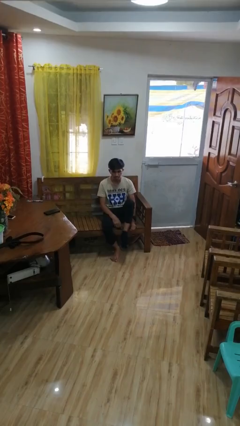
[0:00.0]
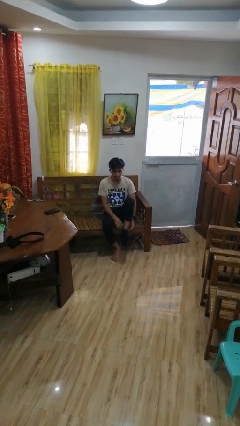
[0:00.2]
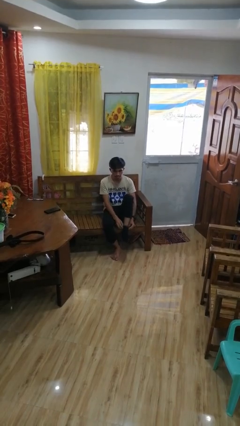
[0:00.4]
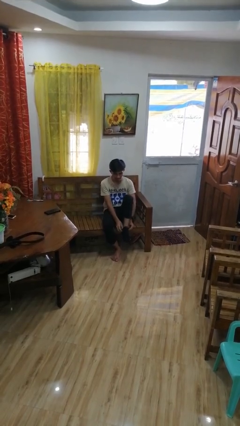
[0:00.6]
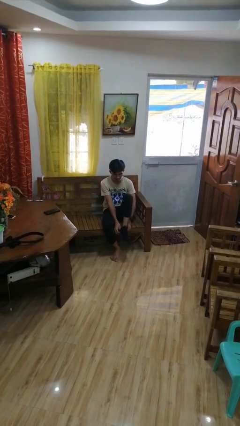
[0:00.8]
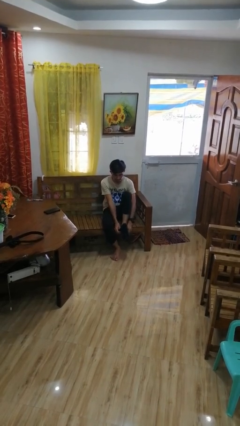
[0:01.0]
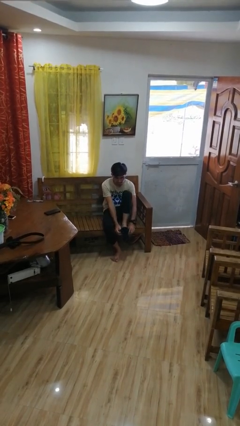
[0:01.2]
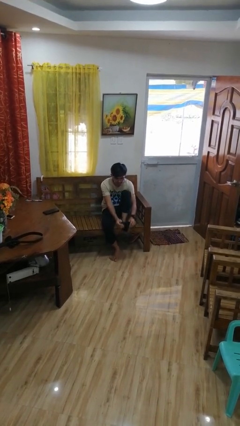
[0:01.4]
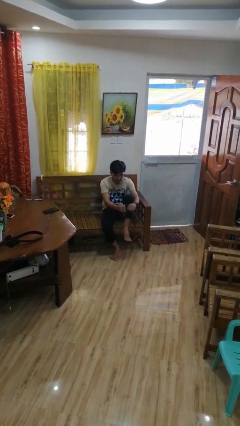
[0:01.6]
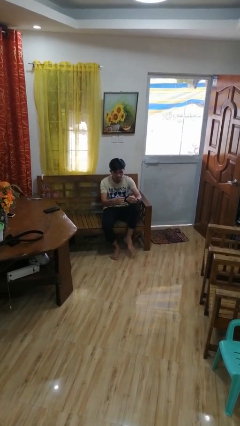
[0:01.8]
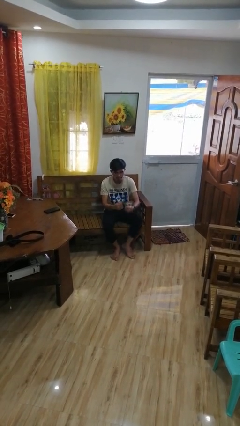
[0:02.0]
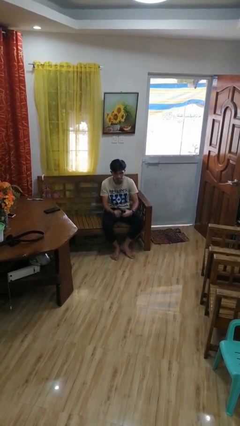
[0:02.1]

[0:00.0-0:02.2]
person takes off socks

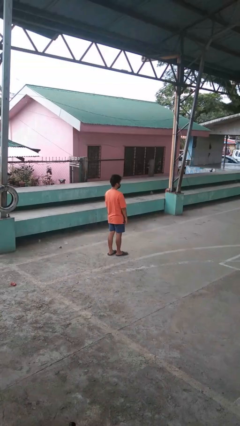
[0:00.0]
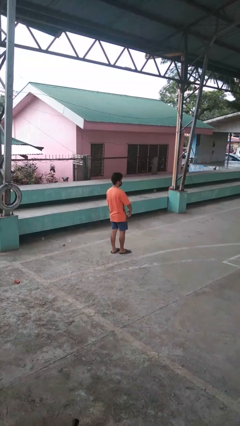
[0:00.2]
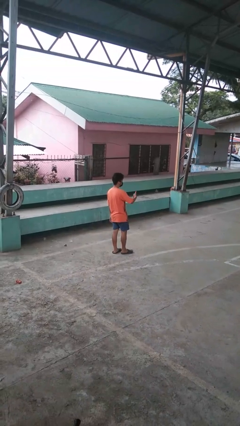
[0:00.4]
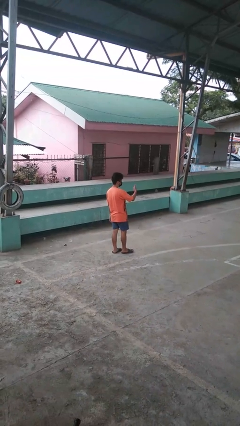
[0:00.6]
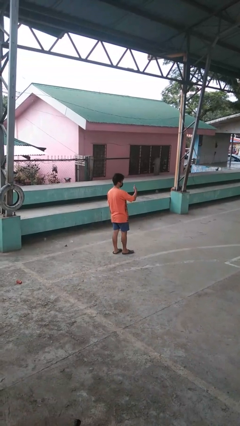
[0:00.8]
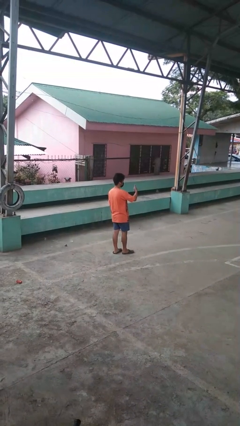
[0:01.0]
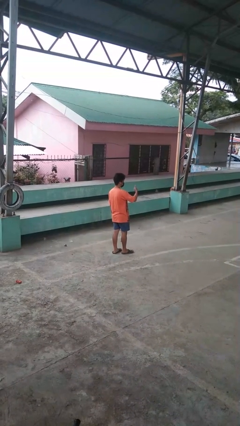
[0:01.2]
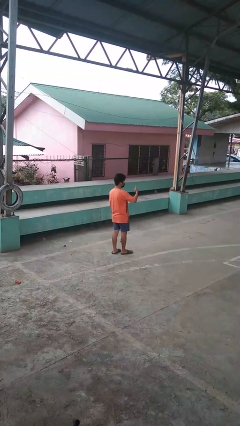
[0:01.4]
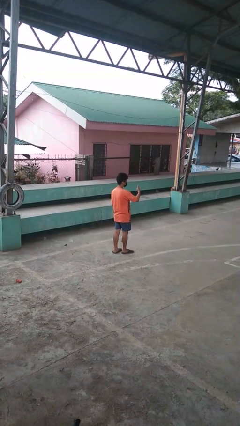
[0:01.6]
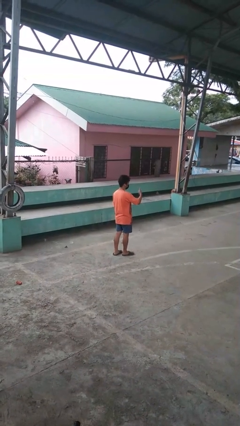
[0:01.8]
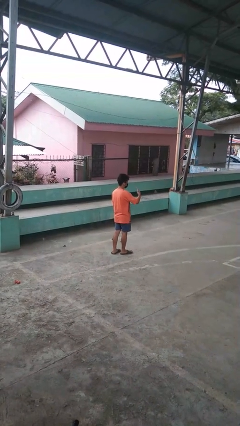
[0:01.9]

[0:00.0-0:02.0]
person gestures thumbs up

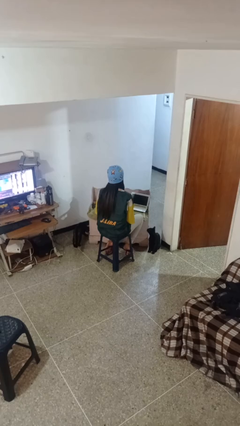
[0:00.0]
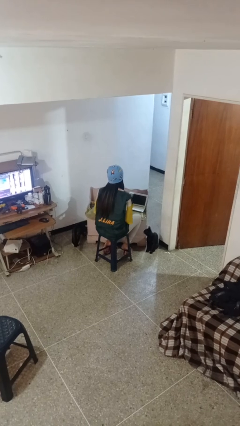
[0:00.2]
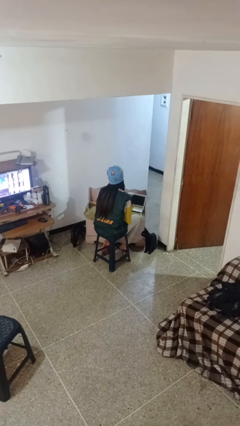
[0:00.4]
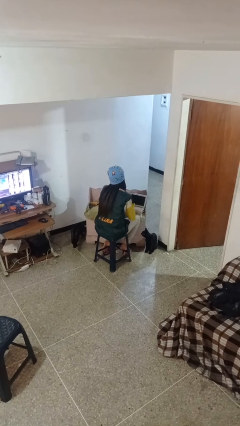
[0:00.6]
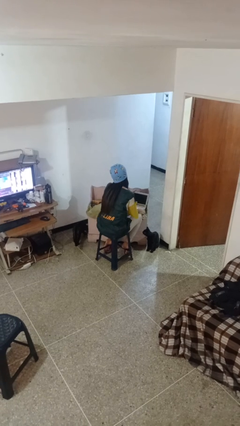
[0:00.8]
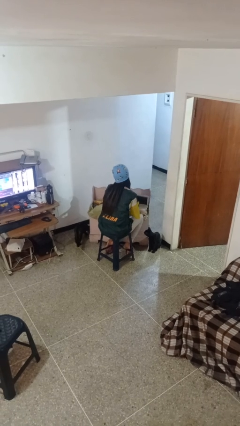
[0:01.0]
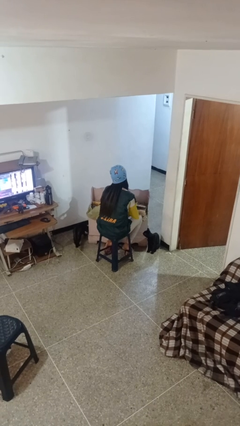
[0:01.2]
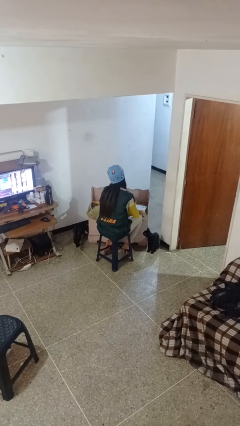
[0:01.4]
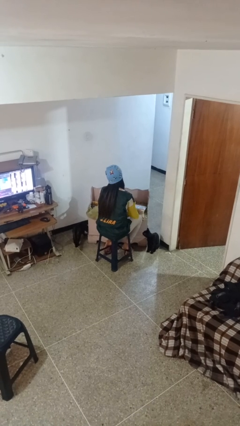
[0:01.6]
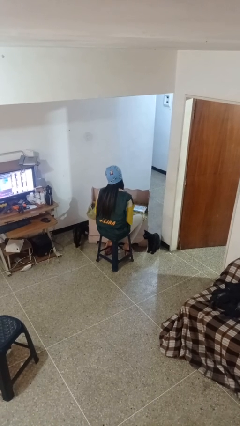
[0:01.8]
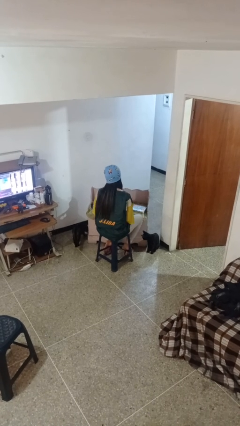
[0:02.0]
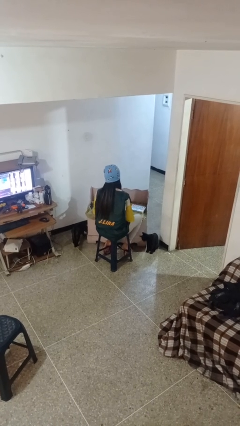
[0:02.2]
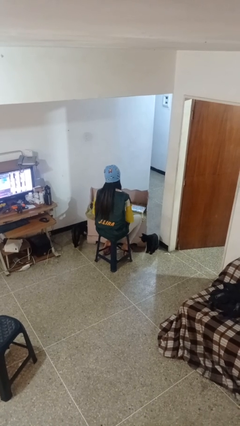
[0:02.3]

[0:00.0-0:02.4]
person closes laptop

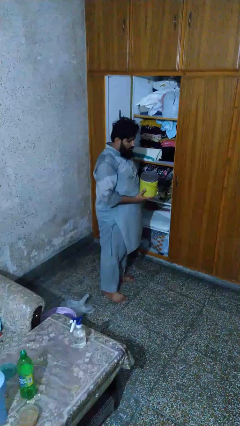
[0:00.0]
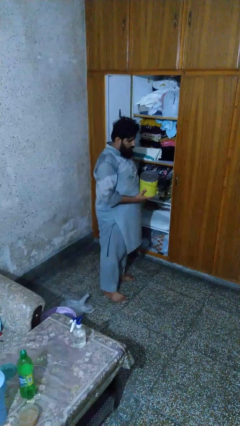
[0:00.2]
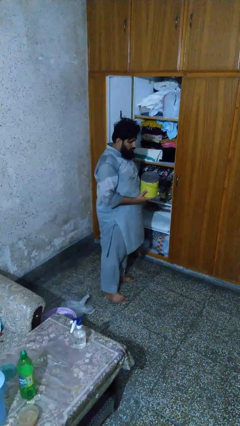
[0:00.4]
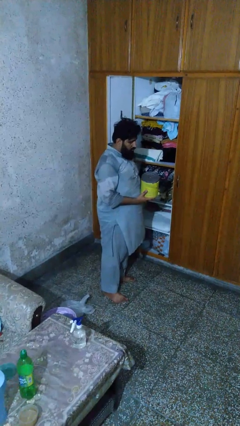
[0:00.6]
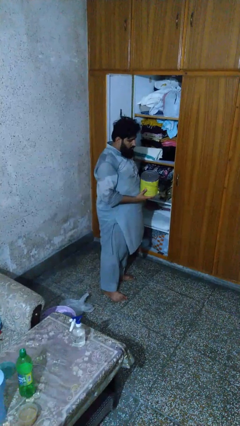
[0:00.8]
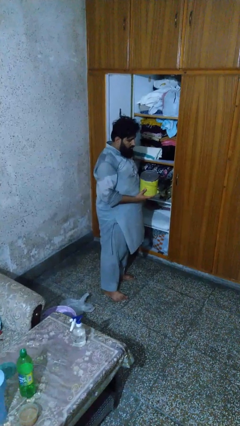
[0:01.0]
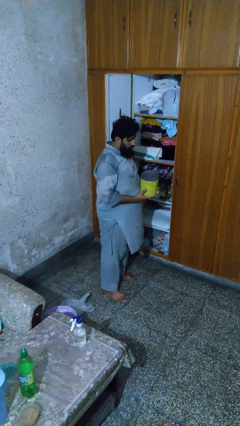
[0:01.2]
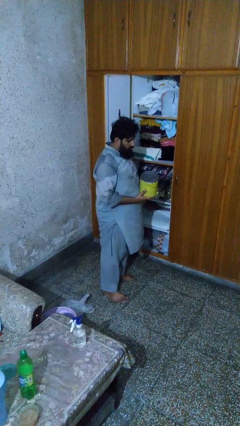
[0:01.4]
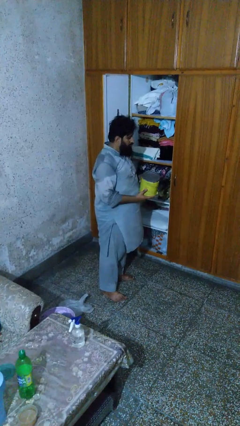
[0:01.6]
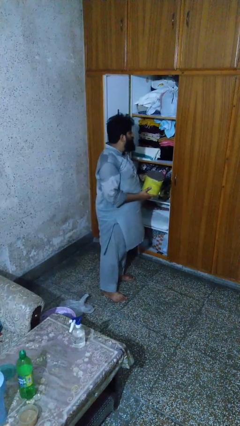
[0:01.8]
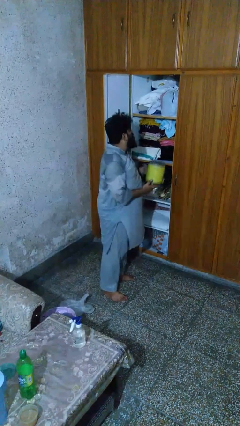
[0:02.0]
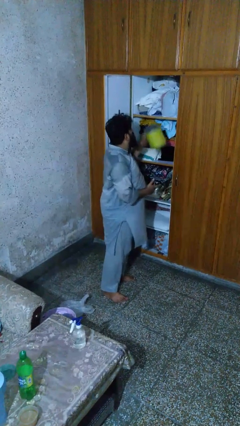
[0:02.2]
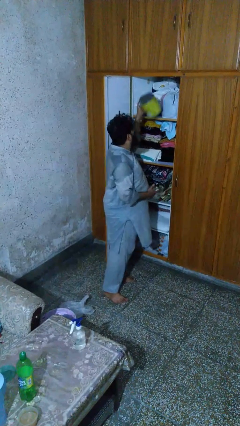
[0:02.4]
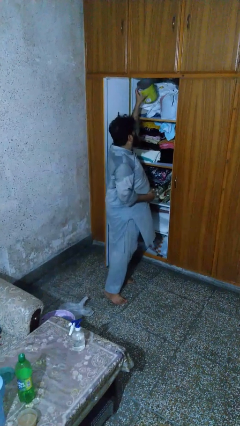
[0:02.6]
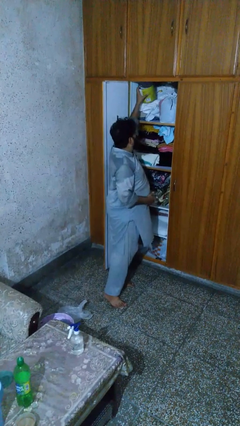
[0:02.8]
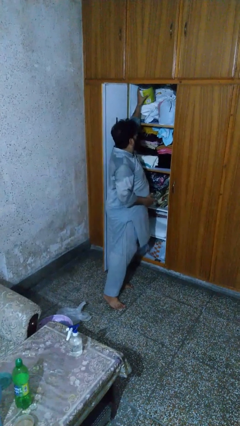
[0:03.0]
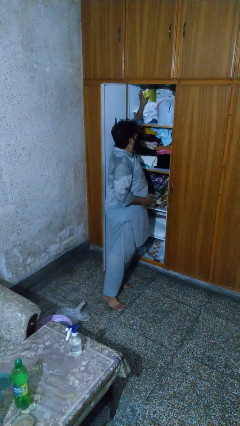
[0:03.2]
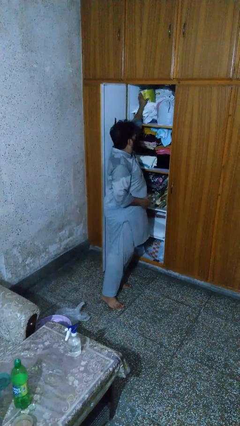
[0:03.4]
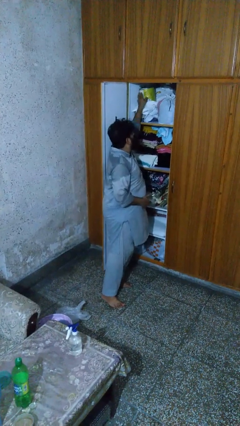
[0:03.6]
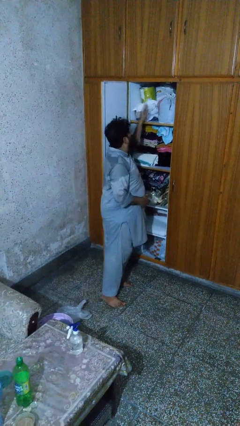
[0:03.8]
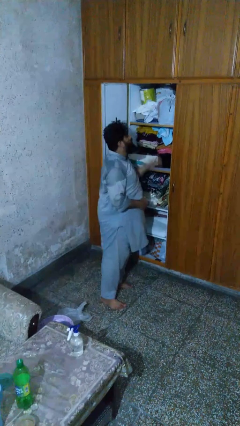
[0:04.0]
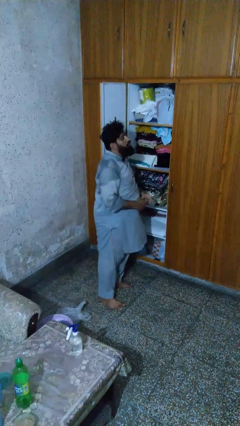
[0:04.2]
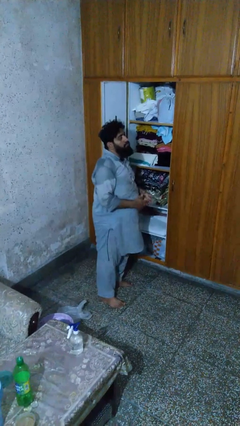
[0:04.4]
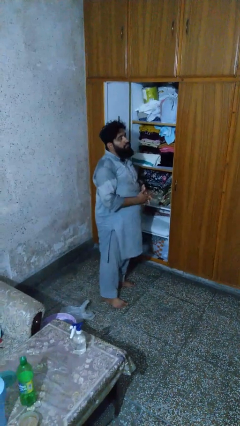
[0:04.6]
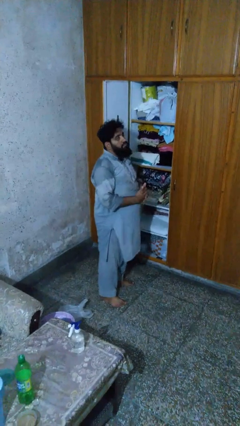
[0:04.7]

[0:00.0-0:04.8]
person puts down object on shelf

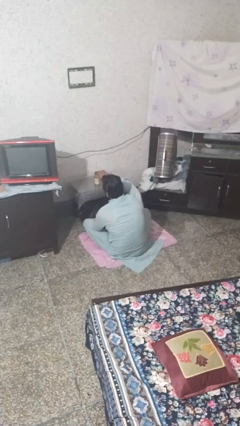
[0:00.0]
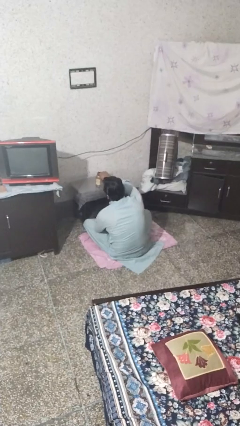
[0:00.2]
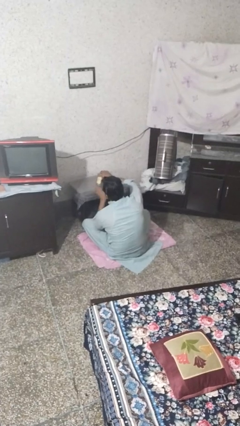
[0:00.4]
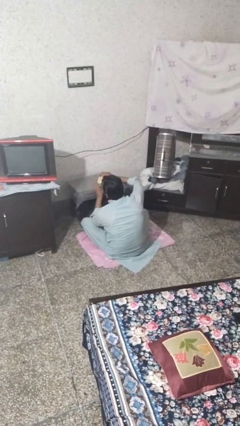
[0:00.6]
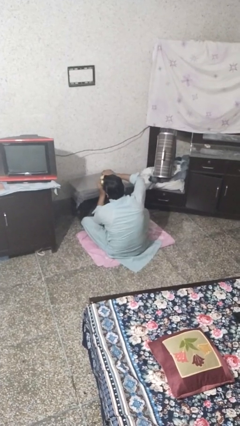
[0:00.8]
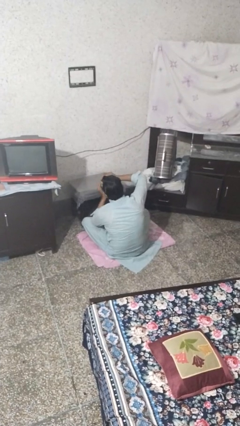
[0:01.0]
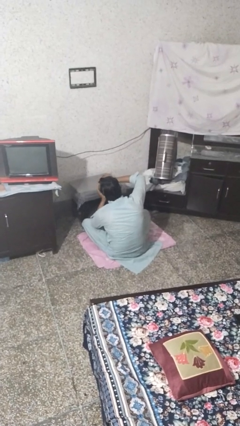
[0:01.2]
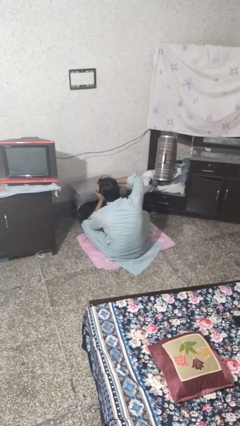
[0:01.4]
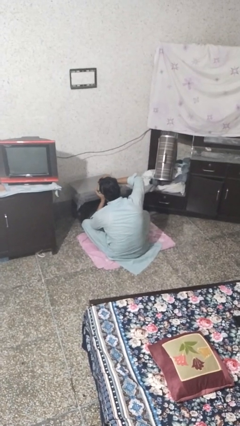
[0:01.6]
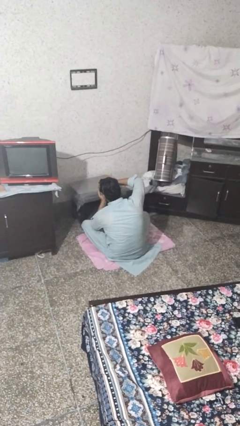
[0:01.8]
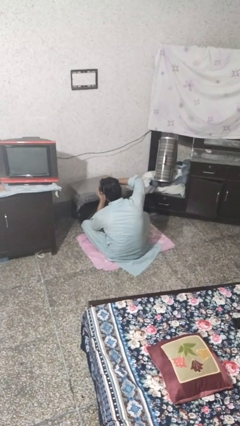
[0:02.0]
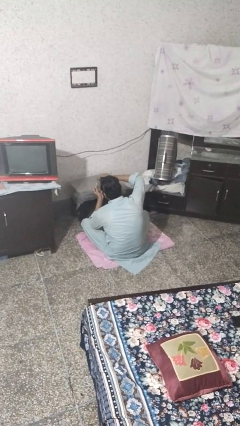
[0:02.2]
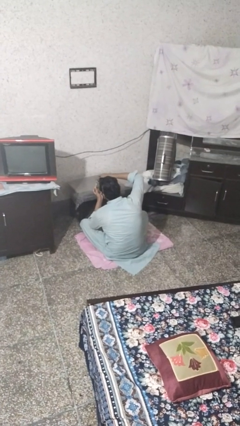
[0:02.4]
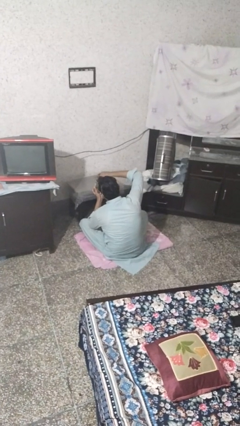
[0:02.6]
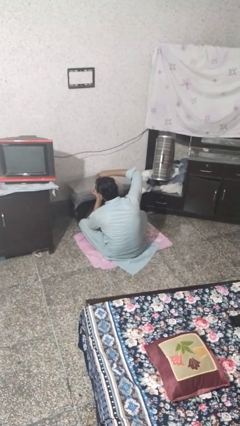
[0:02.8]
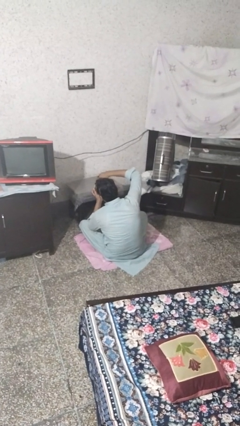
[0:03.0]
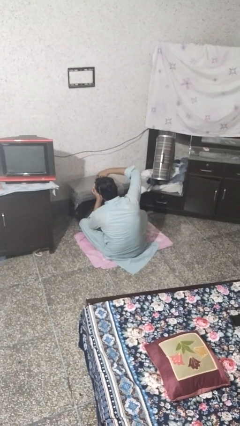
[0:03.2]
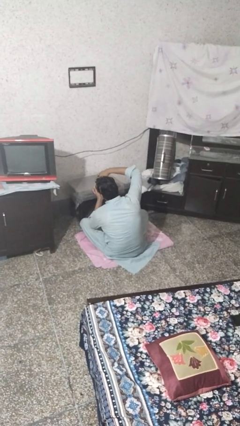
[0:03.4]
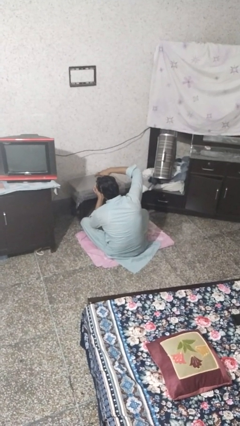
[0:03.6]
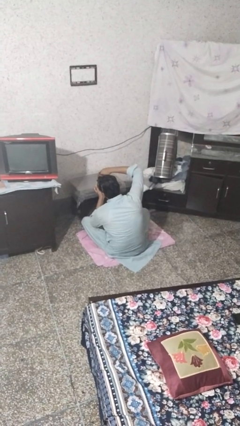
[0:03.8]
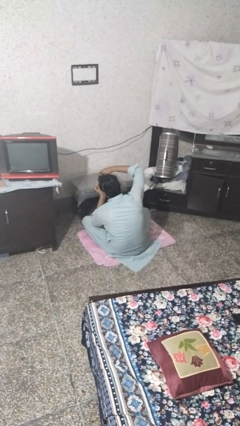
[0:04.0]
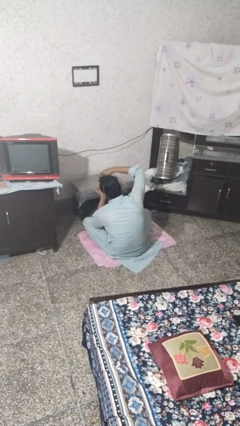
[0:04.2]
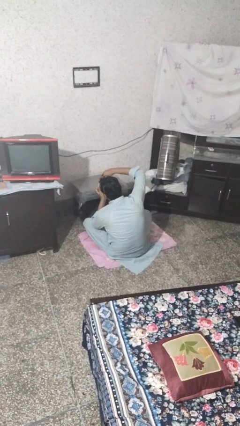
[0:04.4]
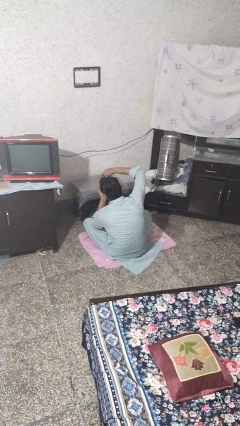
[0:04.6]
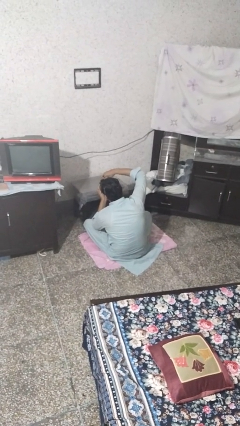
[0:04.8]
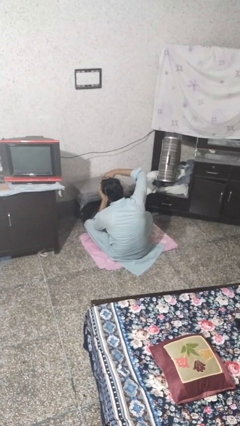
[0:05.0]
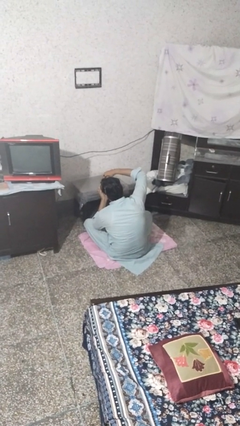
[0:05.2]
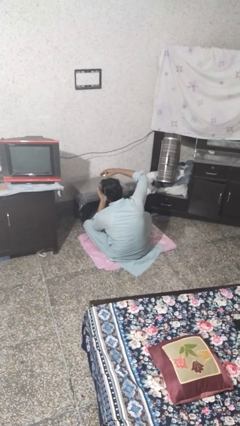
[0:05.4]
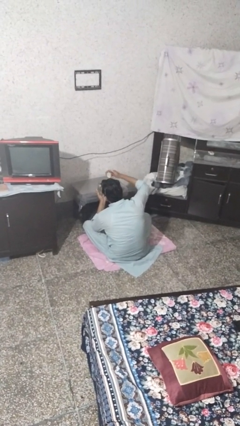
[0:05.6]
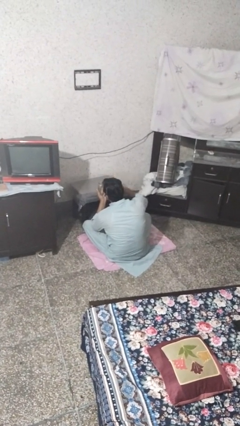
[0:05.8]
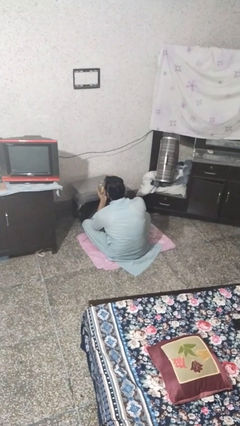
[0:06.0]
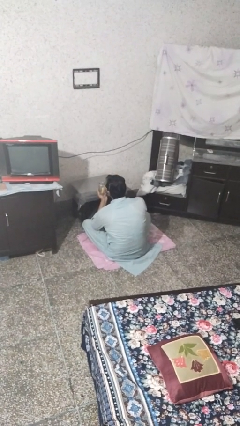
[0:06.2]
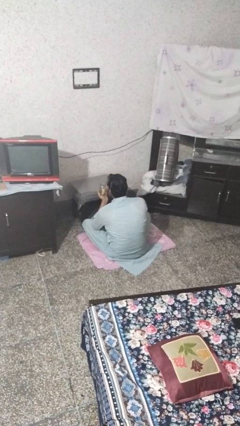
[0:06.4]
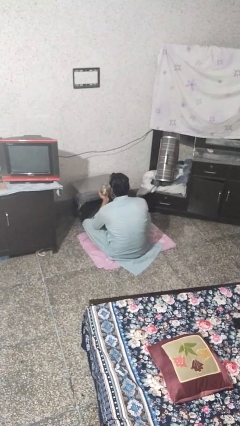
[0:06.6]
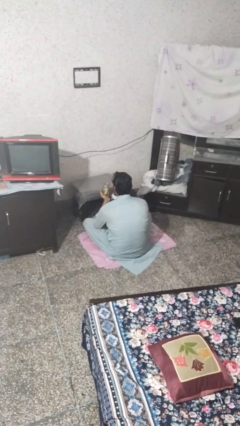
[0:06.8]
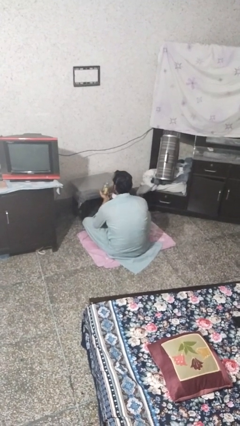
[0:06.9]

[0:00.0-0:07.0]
person opens jar
